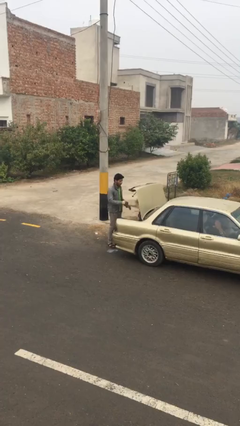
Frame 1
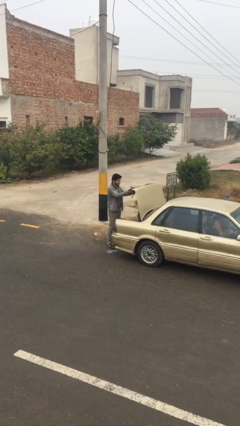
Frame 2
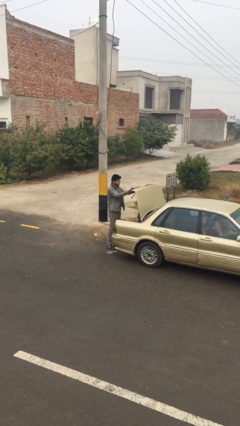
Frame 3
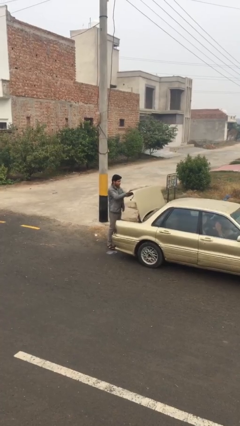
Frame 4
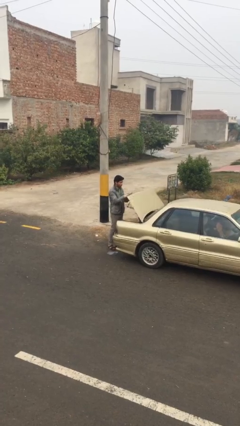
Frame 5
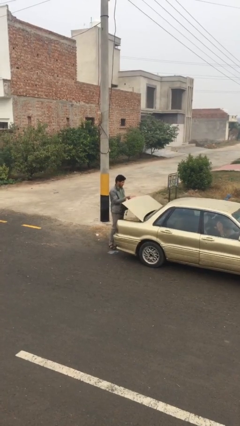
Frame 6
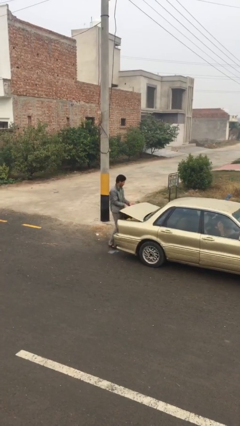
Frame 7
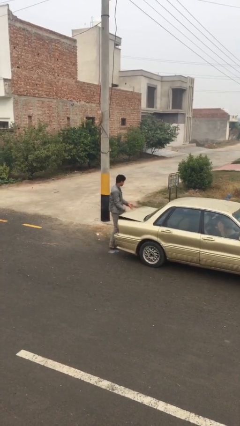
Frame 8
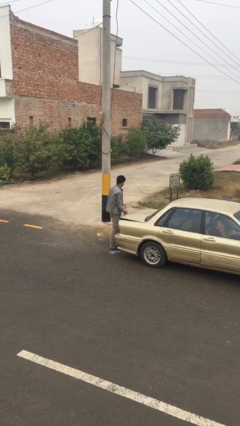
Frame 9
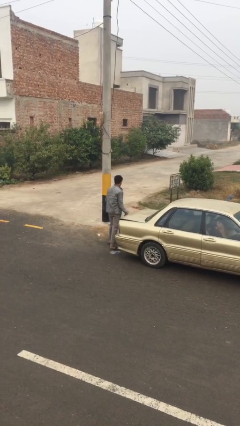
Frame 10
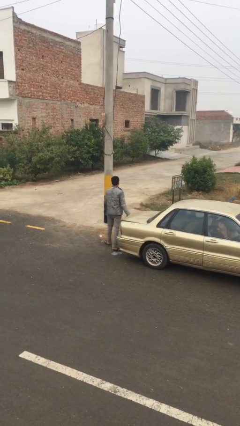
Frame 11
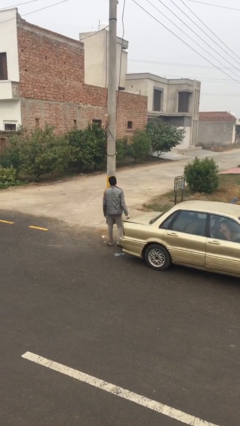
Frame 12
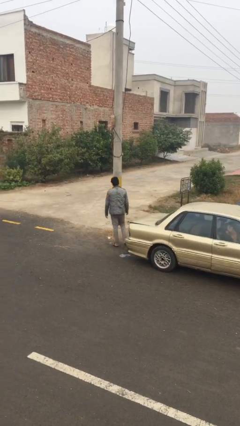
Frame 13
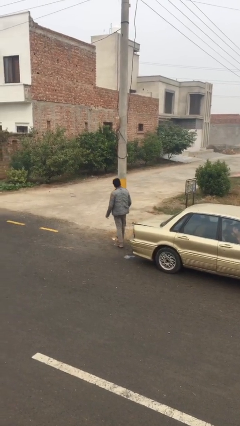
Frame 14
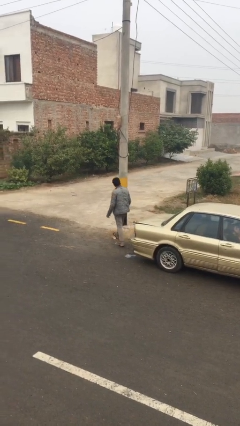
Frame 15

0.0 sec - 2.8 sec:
person closes car trunk

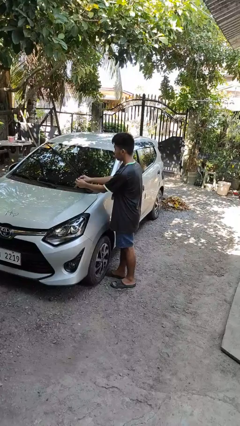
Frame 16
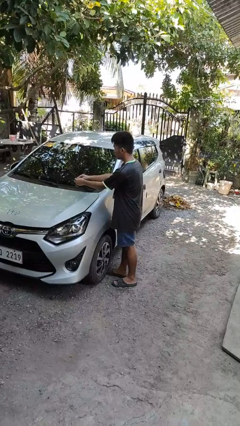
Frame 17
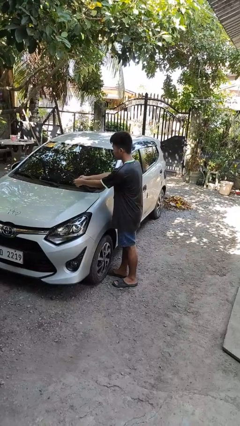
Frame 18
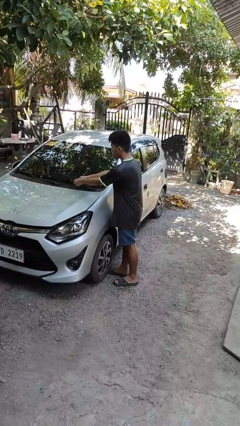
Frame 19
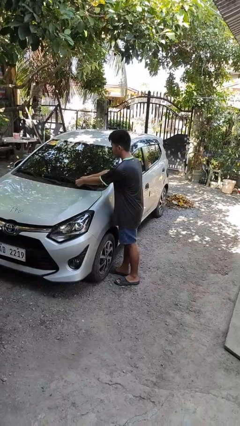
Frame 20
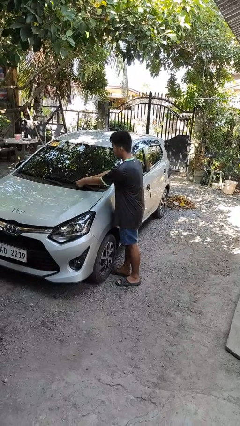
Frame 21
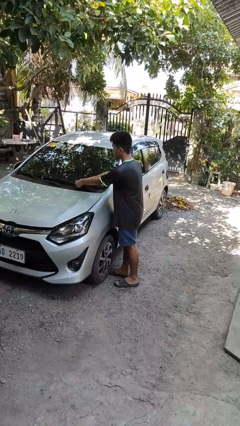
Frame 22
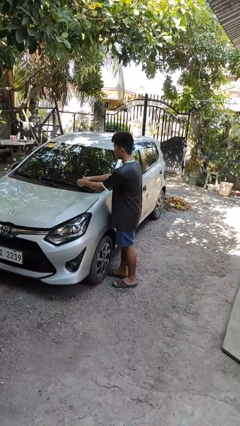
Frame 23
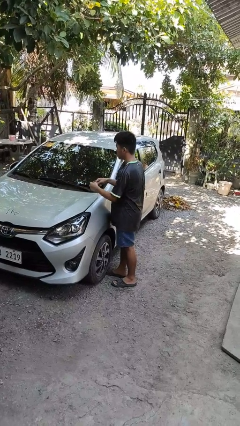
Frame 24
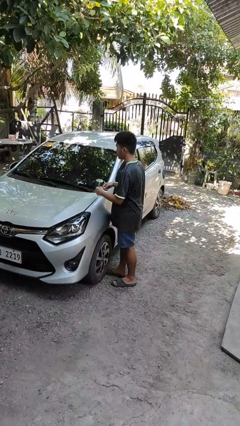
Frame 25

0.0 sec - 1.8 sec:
person flips down car wipers

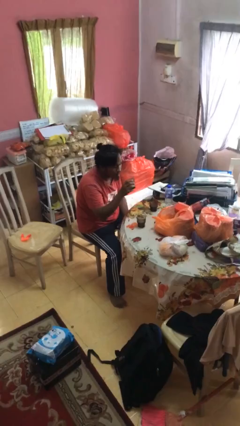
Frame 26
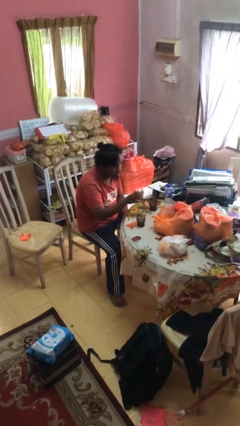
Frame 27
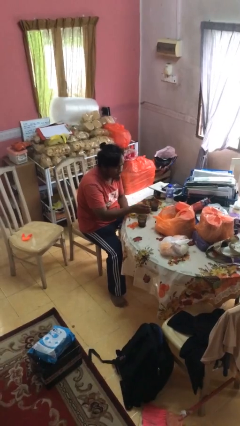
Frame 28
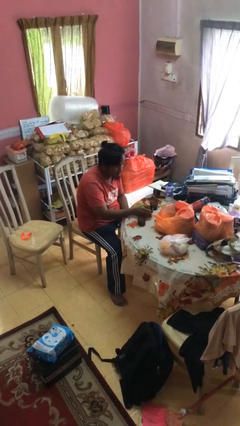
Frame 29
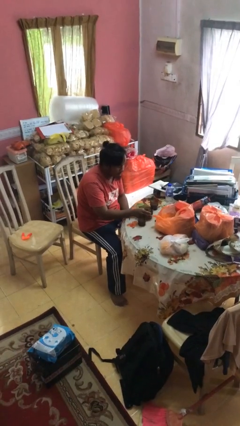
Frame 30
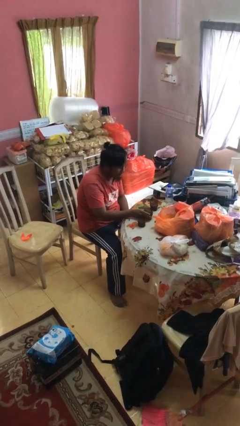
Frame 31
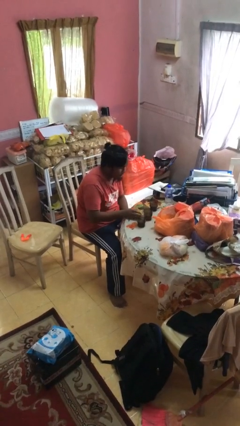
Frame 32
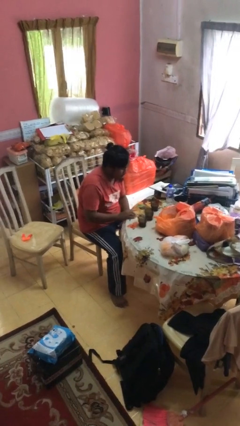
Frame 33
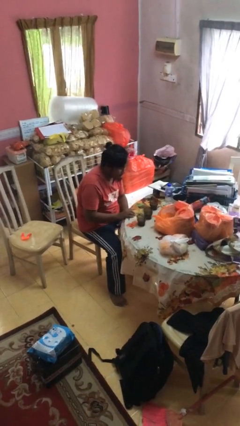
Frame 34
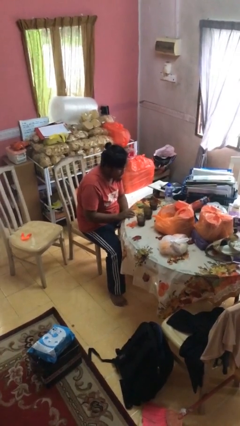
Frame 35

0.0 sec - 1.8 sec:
person puts down object on table

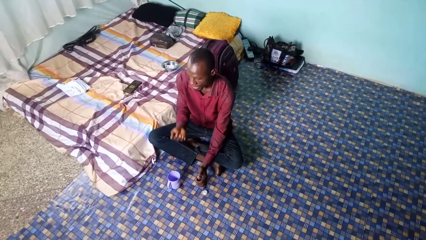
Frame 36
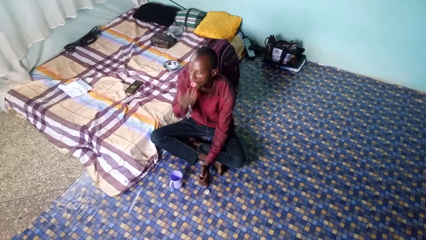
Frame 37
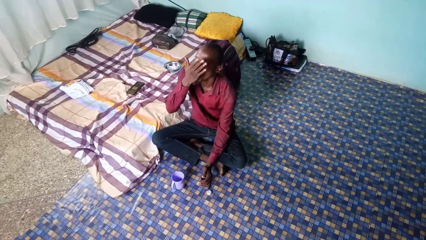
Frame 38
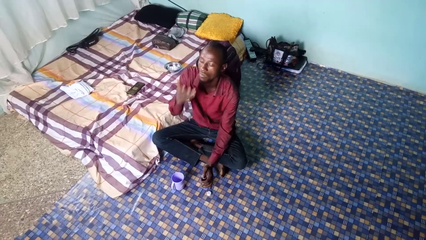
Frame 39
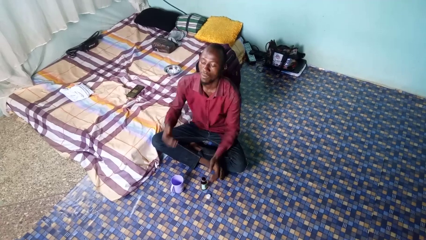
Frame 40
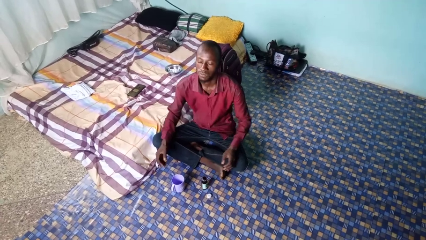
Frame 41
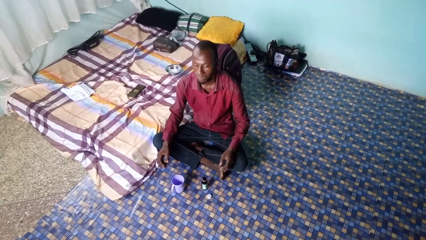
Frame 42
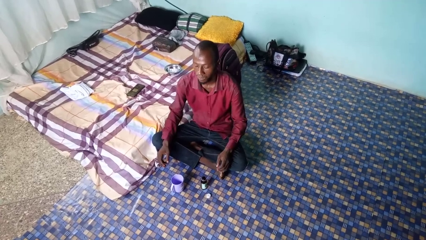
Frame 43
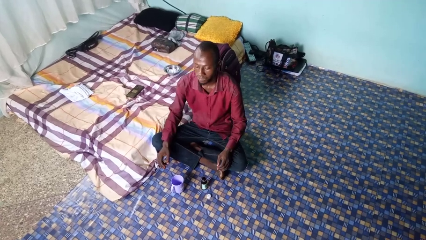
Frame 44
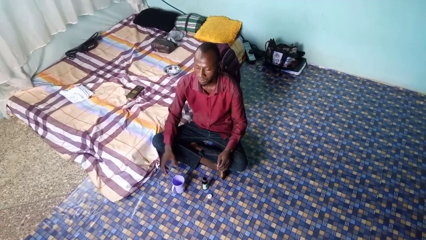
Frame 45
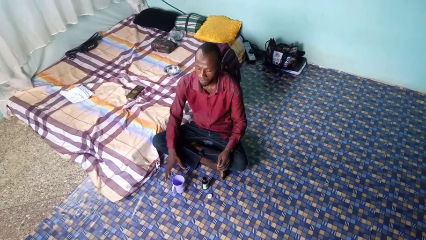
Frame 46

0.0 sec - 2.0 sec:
person takes medicine pills

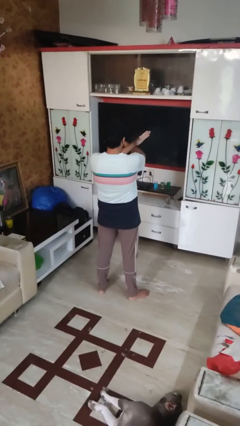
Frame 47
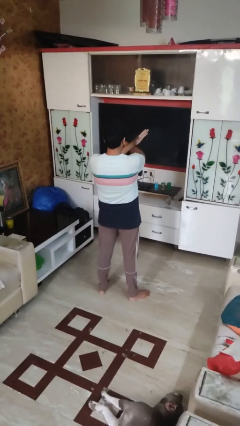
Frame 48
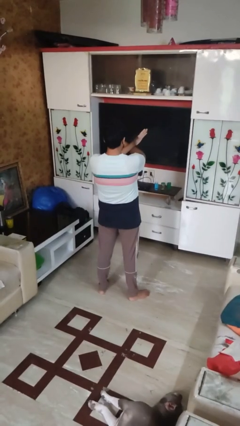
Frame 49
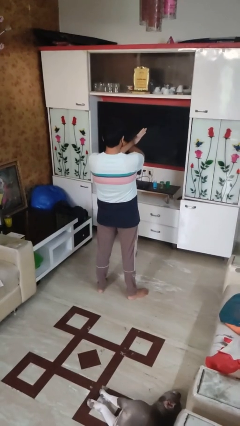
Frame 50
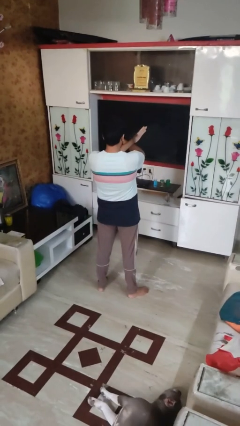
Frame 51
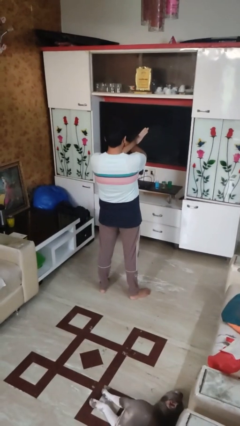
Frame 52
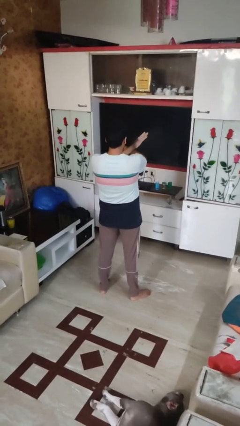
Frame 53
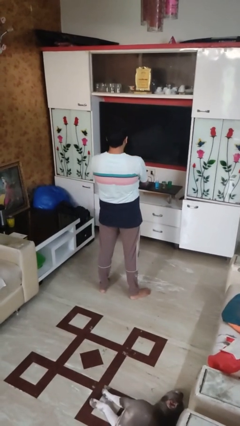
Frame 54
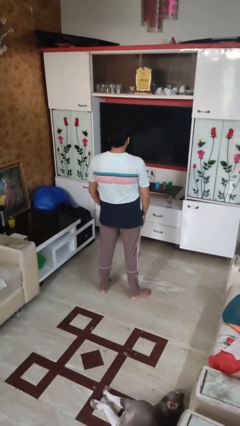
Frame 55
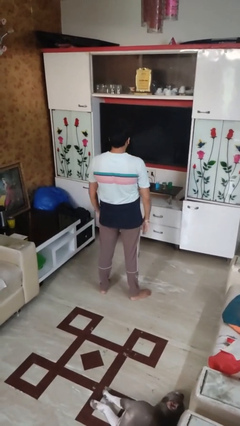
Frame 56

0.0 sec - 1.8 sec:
person gestures arms x

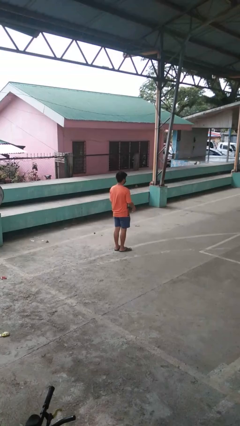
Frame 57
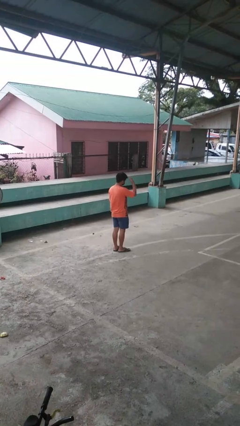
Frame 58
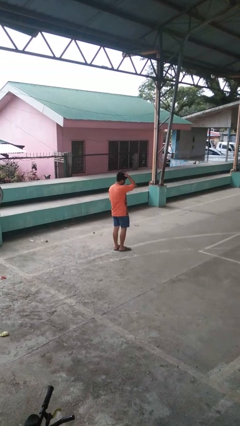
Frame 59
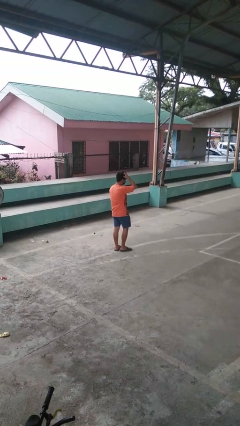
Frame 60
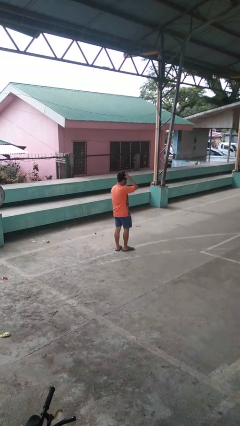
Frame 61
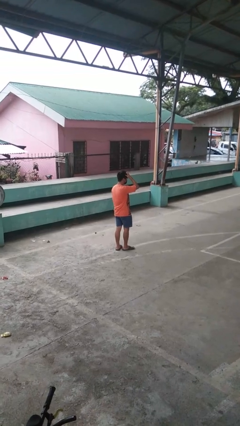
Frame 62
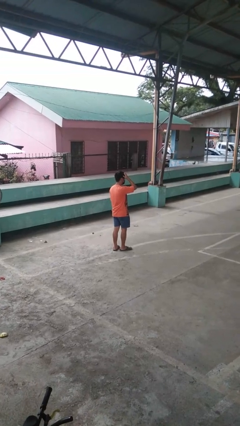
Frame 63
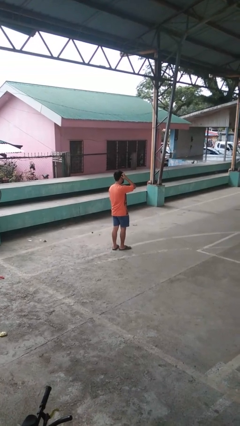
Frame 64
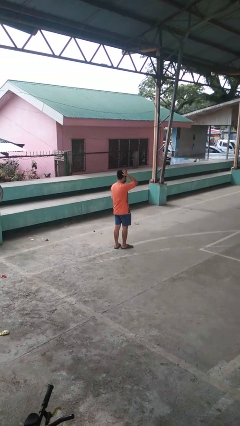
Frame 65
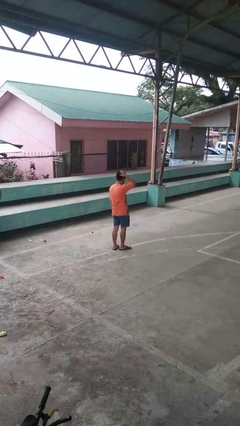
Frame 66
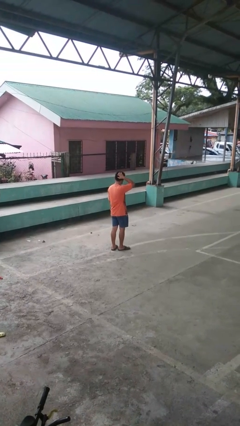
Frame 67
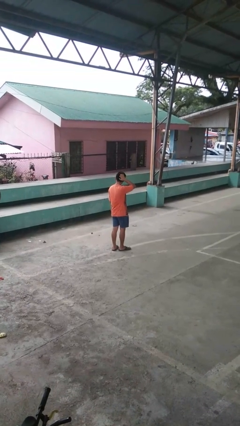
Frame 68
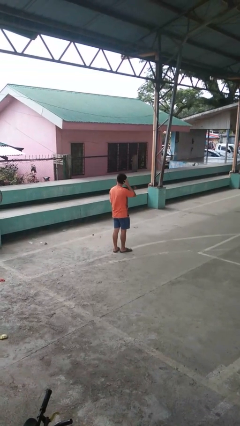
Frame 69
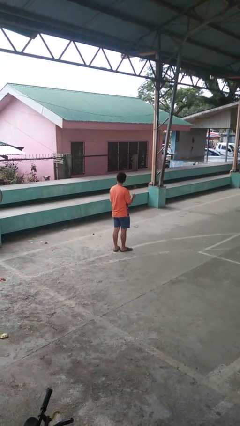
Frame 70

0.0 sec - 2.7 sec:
person scratches face

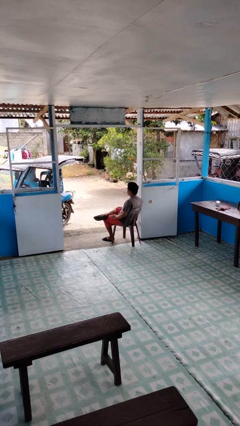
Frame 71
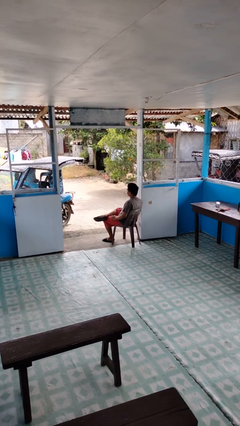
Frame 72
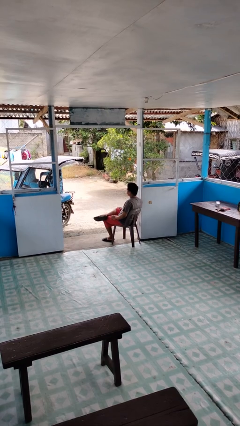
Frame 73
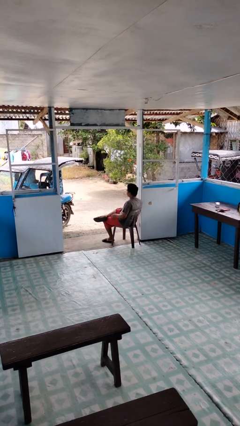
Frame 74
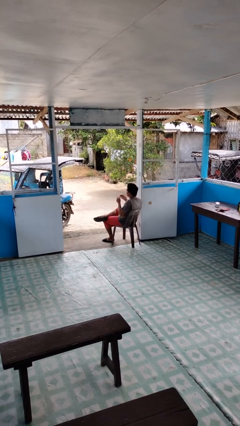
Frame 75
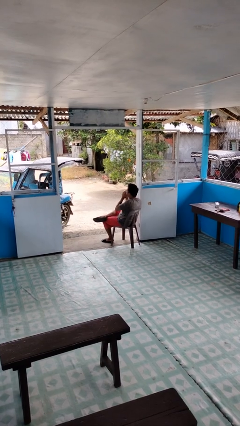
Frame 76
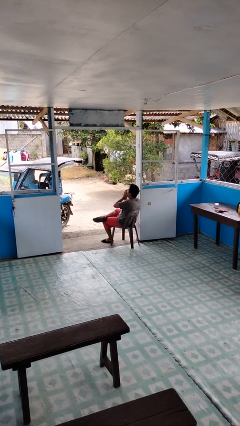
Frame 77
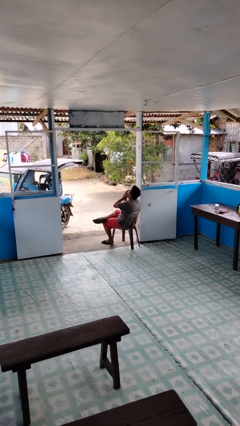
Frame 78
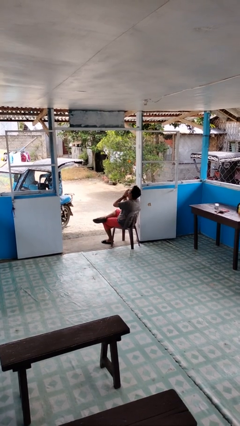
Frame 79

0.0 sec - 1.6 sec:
person yawns

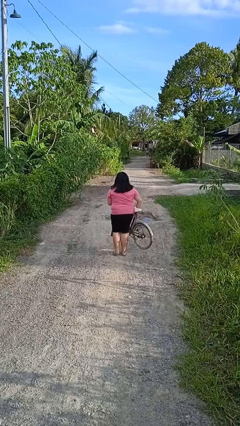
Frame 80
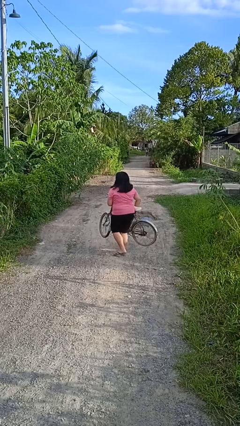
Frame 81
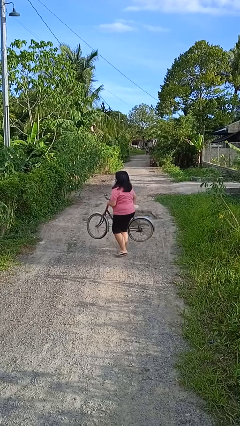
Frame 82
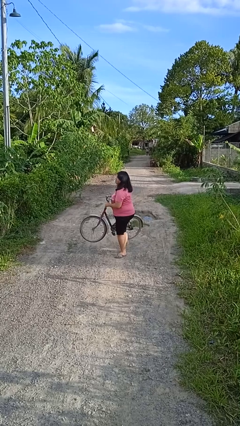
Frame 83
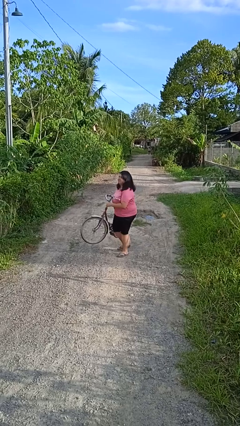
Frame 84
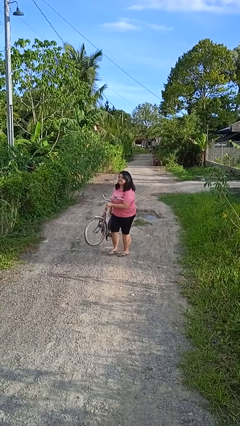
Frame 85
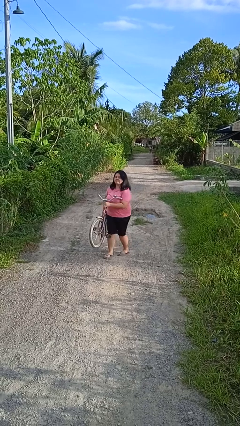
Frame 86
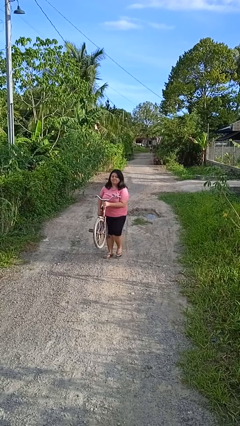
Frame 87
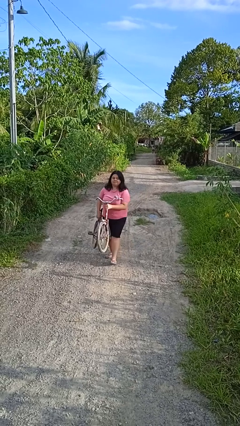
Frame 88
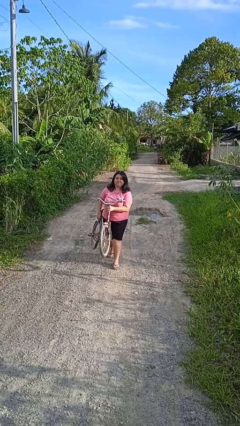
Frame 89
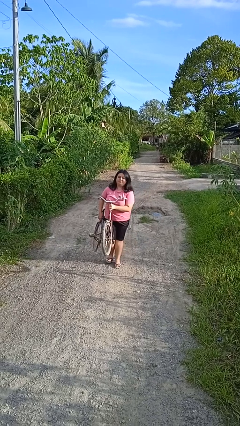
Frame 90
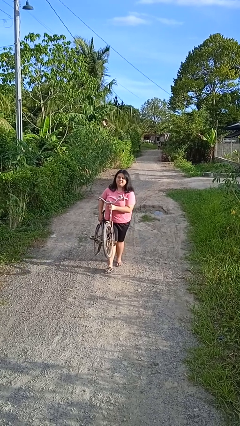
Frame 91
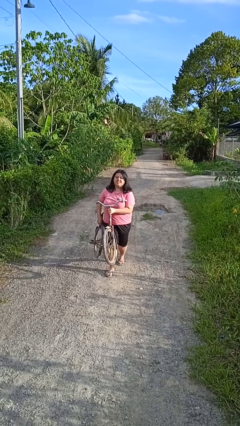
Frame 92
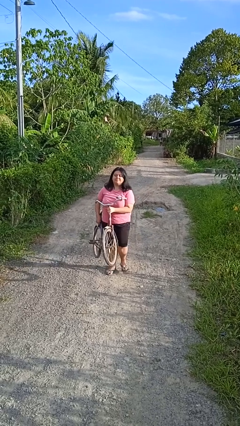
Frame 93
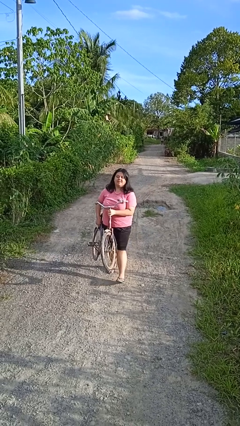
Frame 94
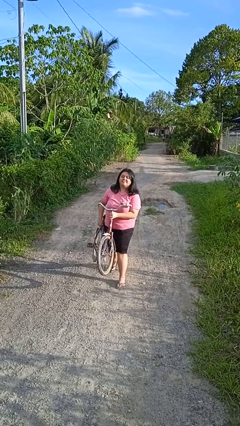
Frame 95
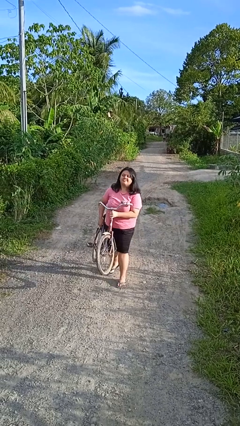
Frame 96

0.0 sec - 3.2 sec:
person carries bicycle
